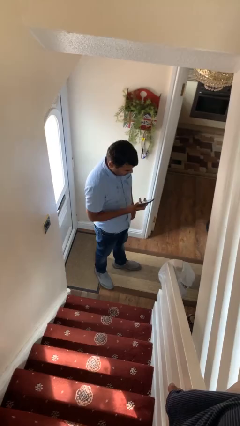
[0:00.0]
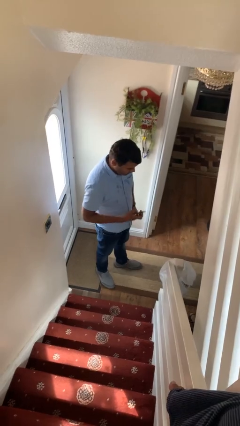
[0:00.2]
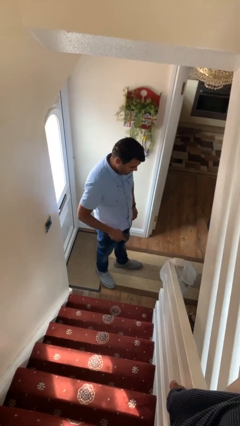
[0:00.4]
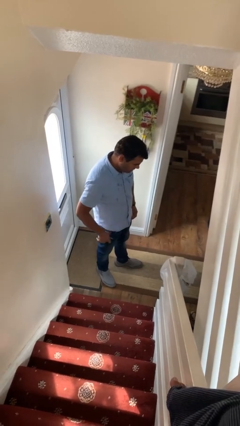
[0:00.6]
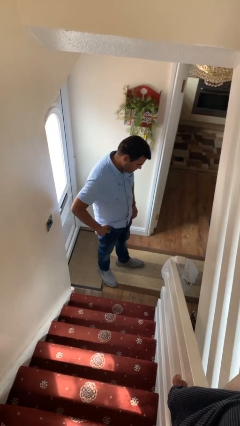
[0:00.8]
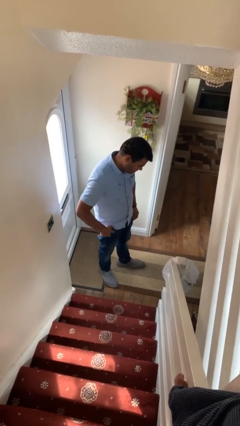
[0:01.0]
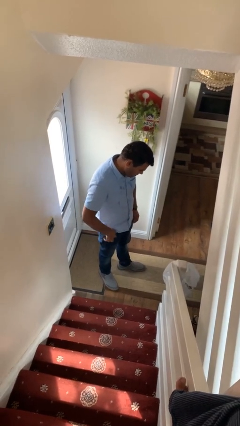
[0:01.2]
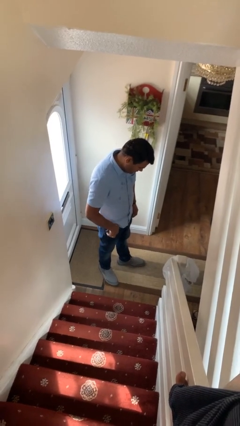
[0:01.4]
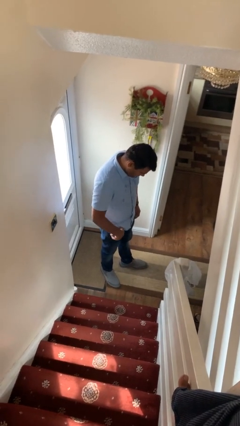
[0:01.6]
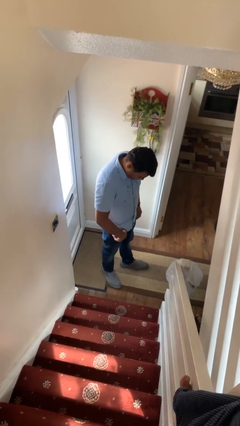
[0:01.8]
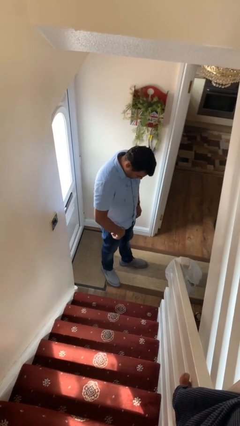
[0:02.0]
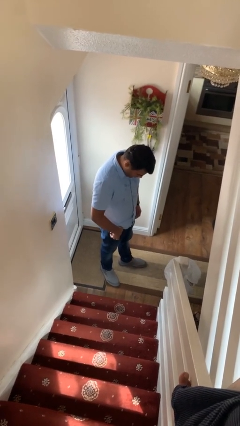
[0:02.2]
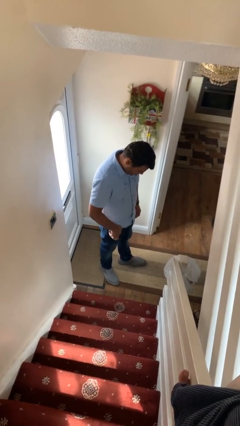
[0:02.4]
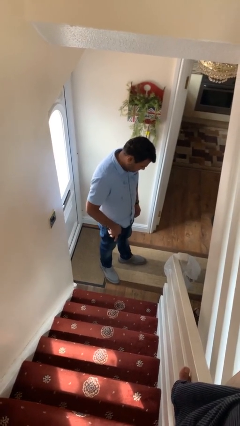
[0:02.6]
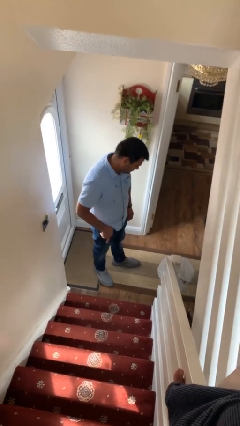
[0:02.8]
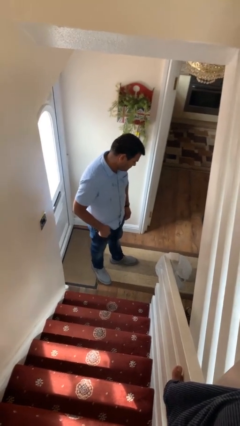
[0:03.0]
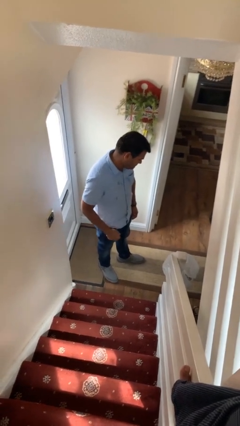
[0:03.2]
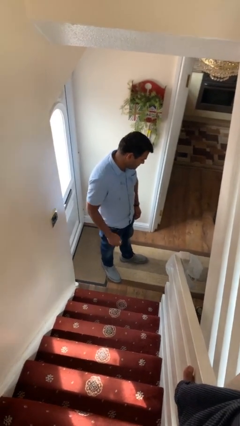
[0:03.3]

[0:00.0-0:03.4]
person puts phone into pocket

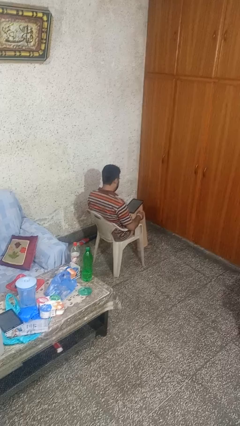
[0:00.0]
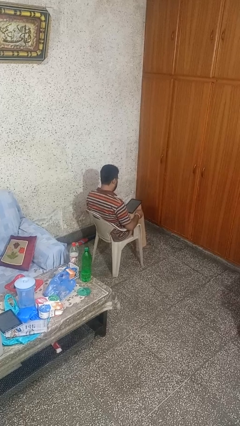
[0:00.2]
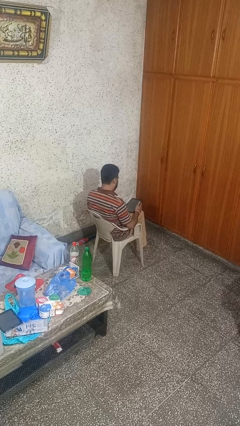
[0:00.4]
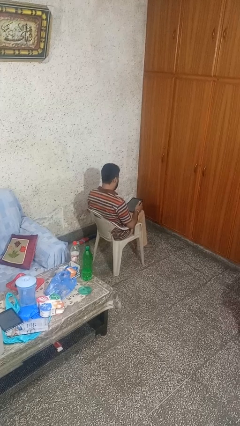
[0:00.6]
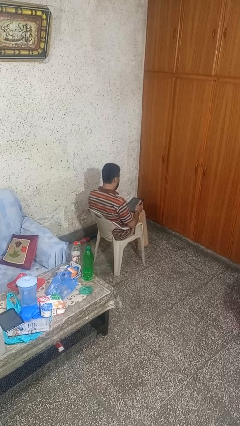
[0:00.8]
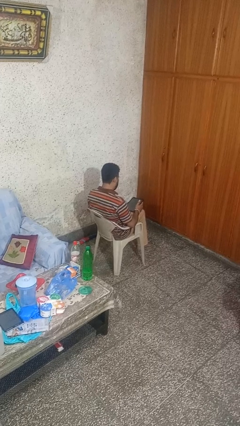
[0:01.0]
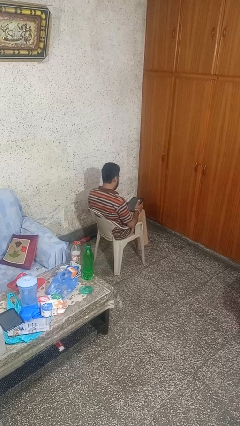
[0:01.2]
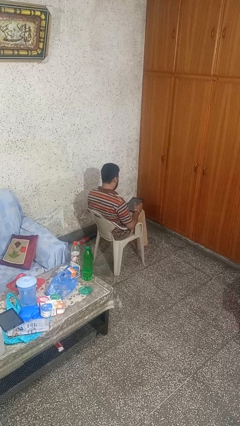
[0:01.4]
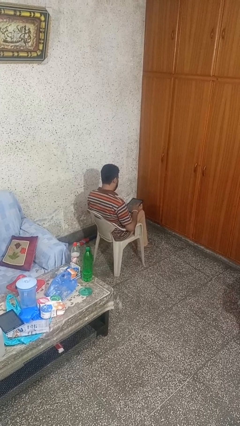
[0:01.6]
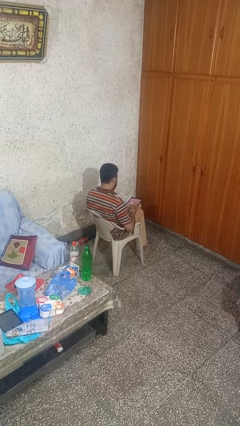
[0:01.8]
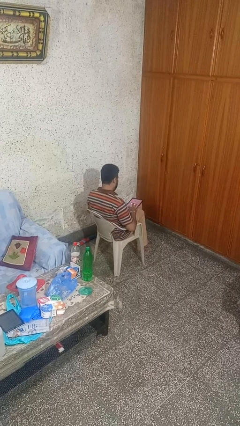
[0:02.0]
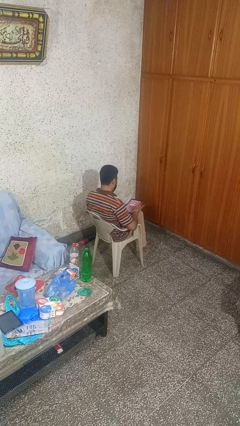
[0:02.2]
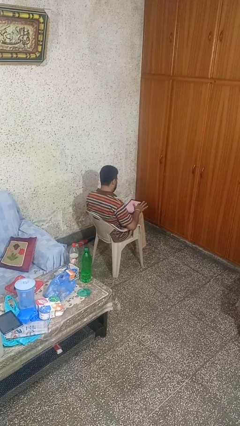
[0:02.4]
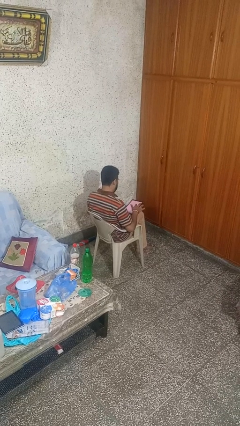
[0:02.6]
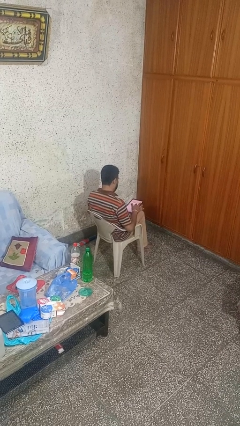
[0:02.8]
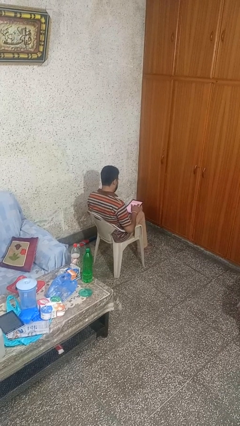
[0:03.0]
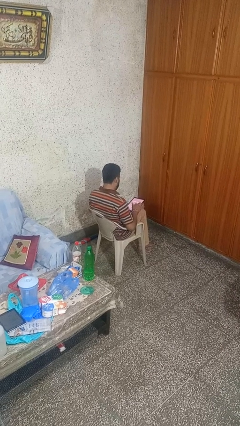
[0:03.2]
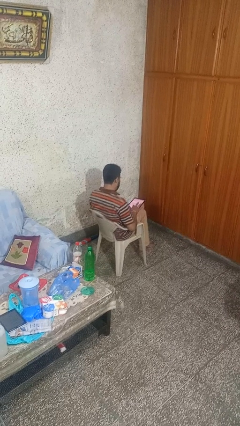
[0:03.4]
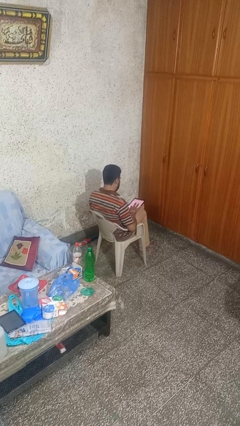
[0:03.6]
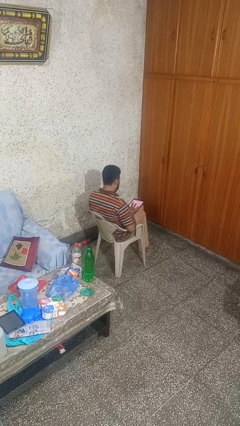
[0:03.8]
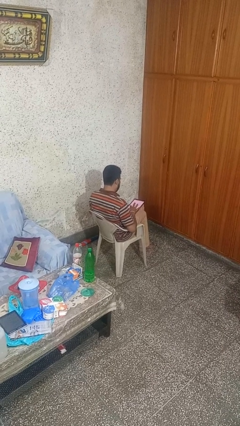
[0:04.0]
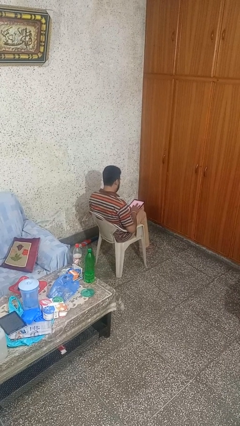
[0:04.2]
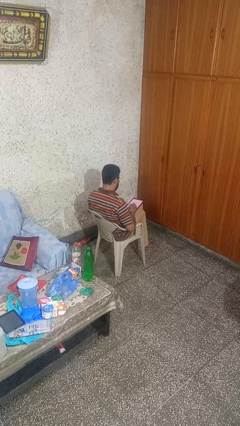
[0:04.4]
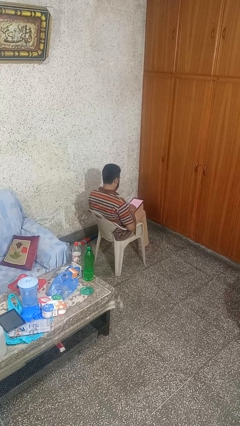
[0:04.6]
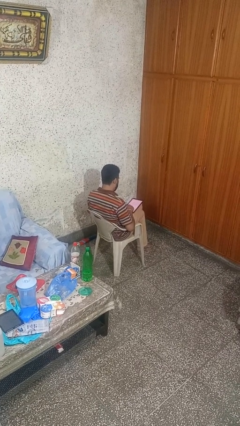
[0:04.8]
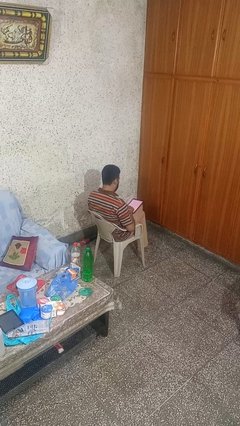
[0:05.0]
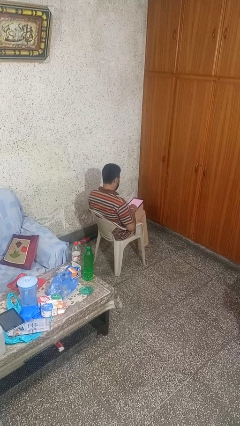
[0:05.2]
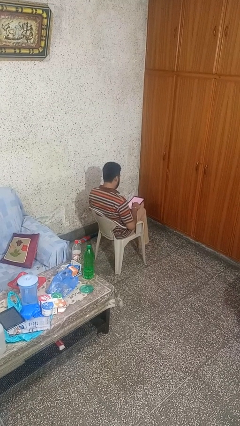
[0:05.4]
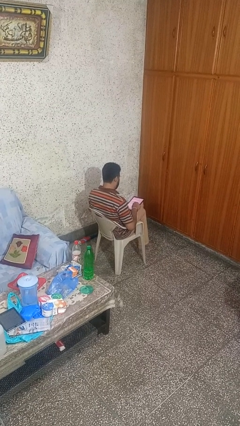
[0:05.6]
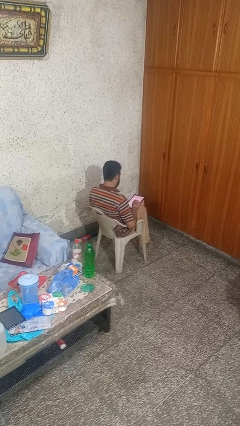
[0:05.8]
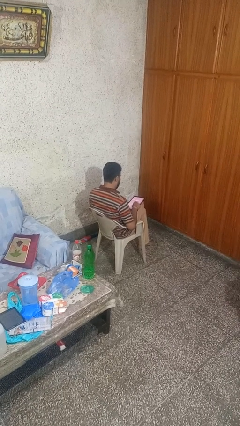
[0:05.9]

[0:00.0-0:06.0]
person interacts with tablet

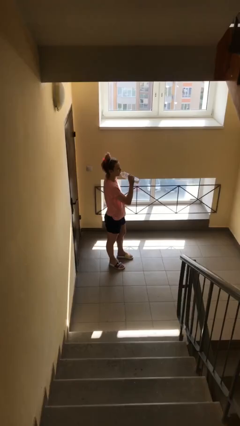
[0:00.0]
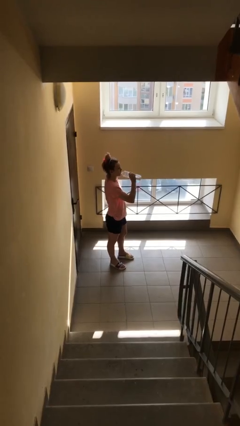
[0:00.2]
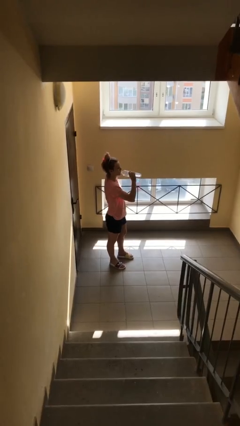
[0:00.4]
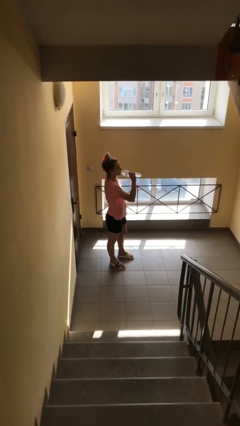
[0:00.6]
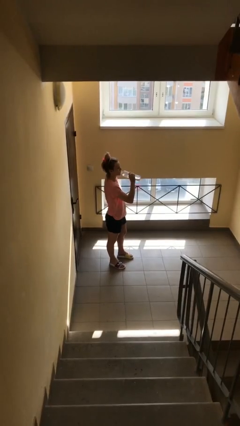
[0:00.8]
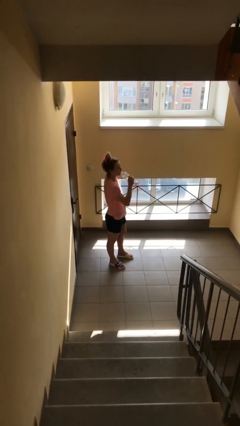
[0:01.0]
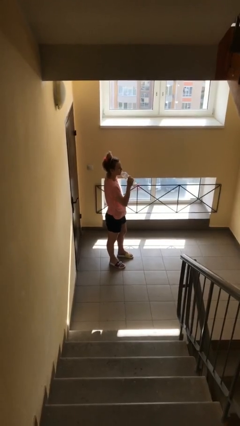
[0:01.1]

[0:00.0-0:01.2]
person drinks from bottle

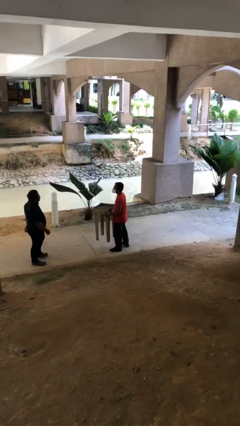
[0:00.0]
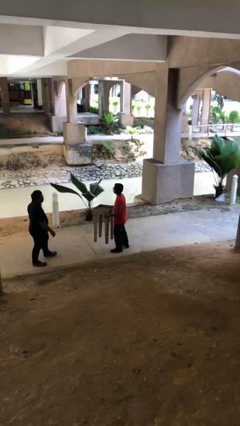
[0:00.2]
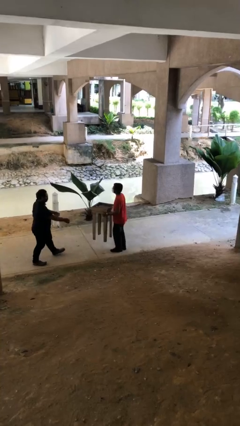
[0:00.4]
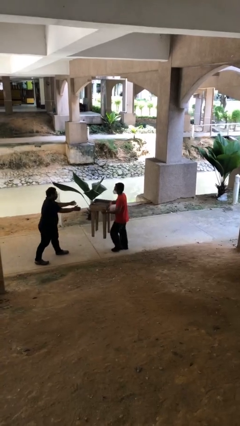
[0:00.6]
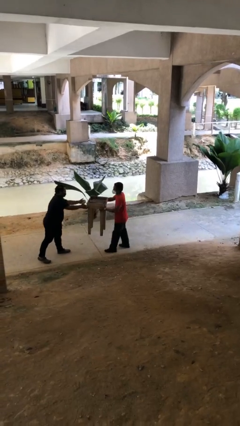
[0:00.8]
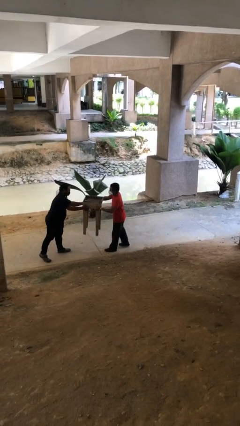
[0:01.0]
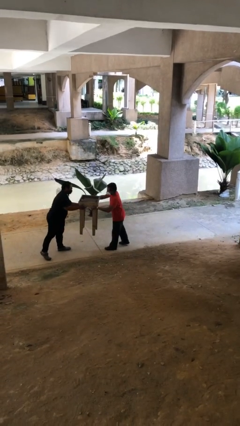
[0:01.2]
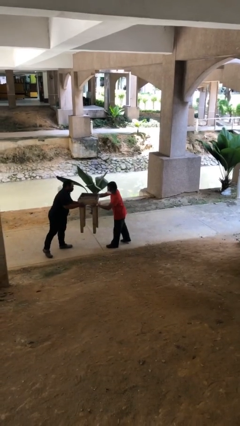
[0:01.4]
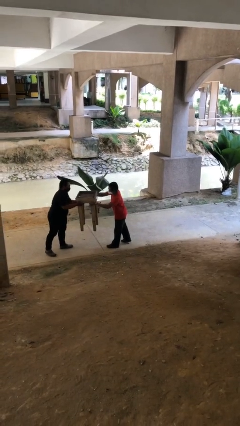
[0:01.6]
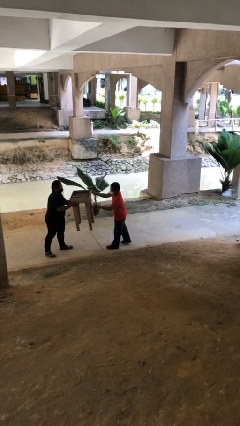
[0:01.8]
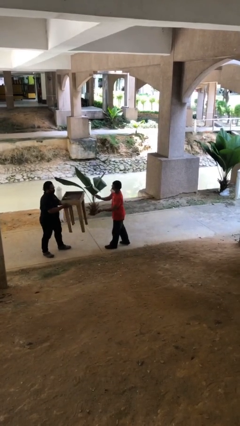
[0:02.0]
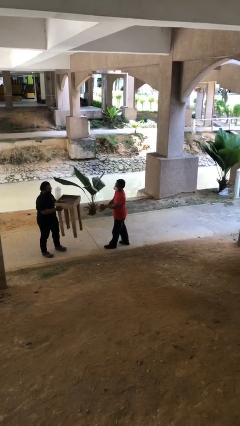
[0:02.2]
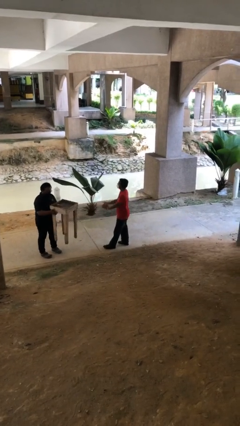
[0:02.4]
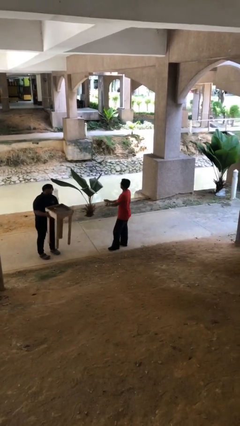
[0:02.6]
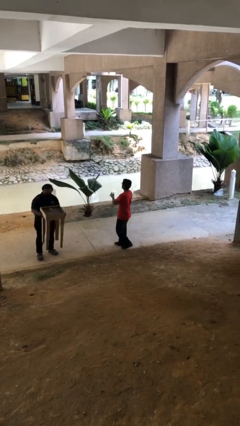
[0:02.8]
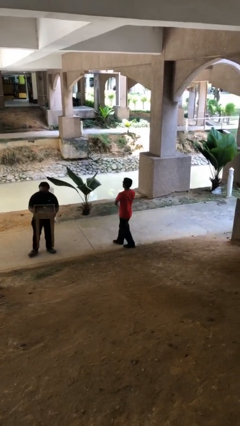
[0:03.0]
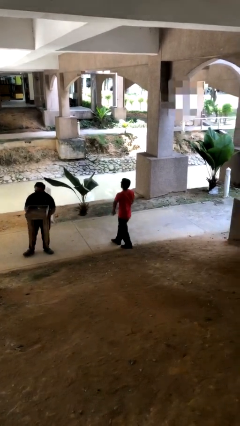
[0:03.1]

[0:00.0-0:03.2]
person transfers object to person

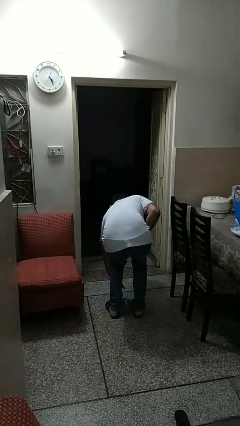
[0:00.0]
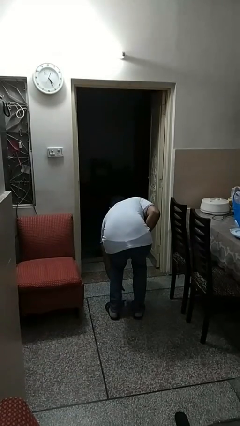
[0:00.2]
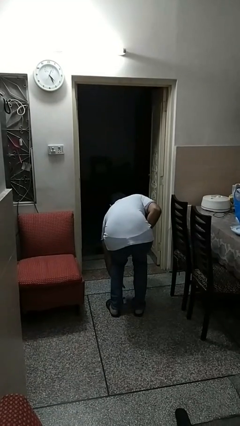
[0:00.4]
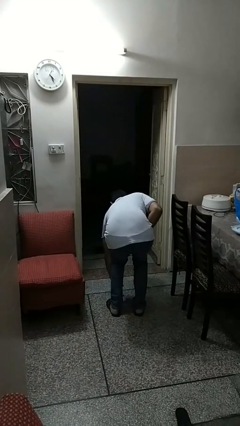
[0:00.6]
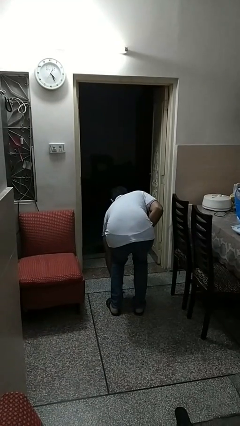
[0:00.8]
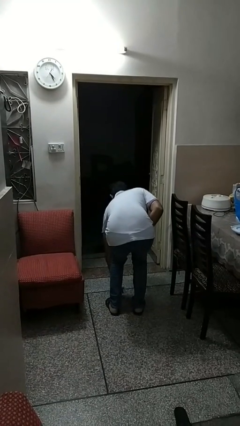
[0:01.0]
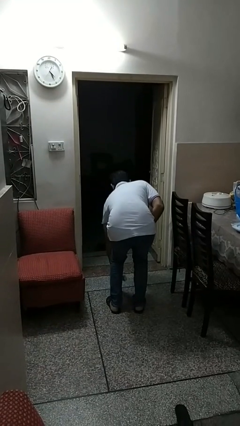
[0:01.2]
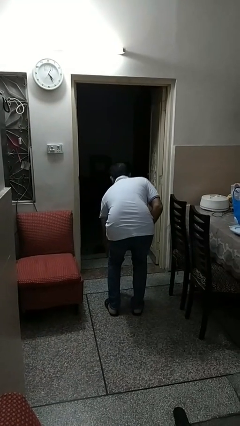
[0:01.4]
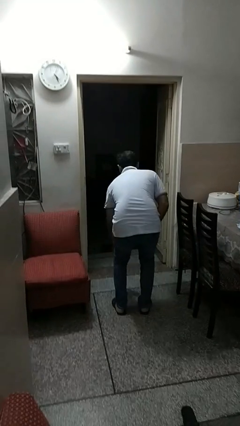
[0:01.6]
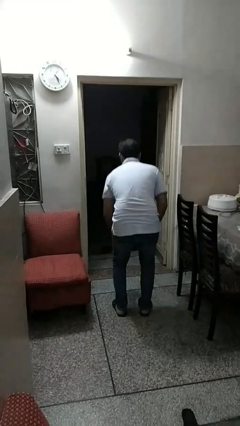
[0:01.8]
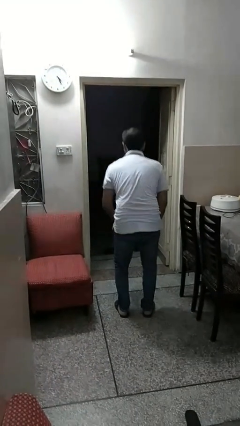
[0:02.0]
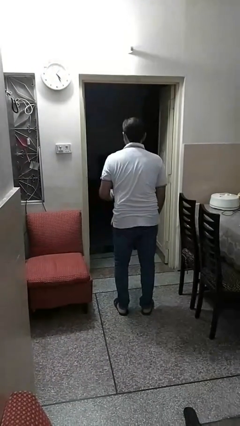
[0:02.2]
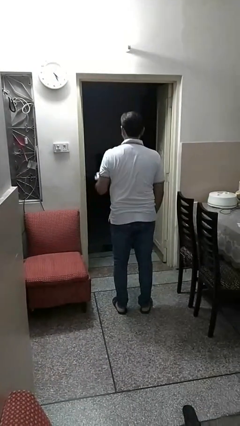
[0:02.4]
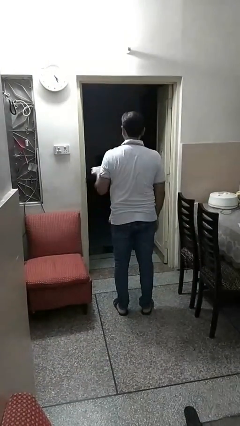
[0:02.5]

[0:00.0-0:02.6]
person picks up object from floor

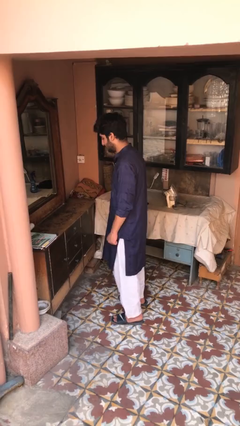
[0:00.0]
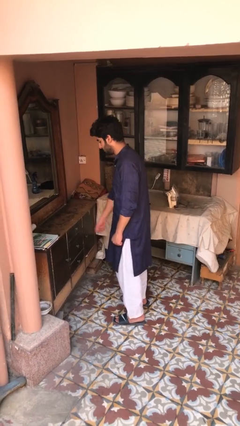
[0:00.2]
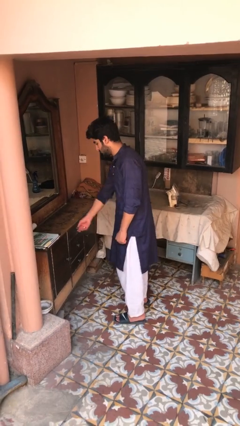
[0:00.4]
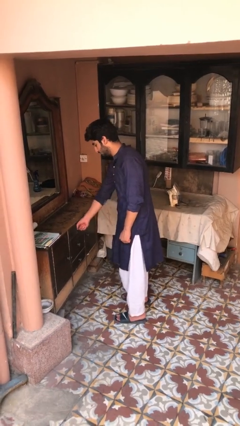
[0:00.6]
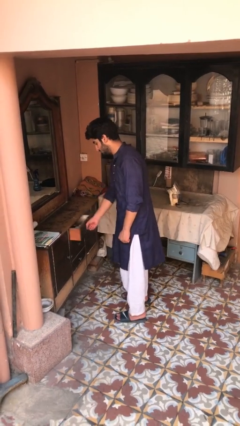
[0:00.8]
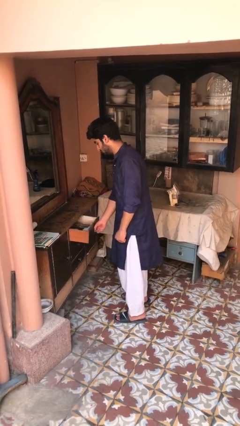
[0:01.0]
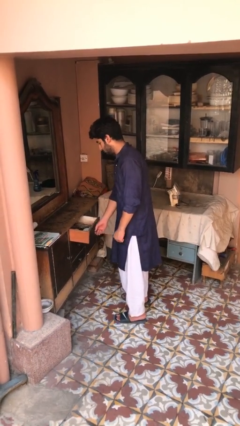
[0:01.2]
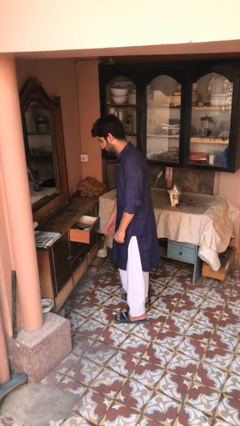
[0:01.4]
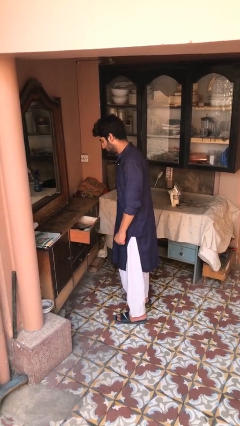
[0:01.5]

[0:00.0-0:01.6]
person opens dresser drawer
